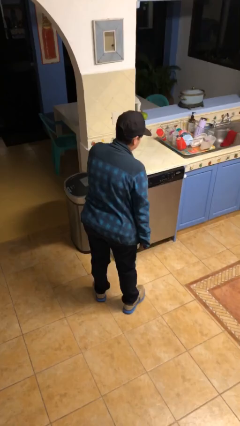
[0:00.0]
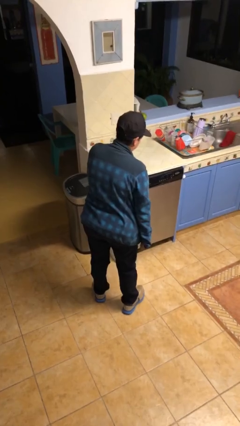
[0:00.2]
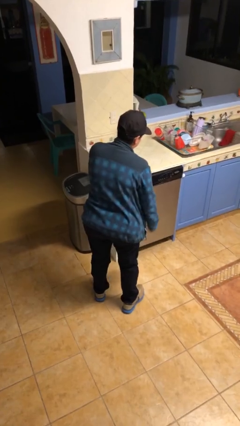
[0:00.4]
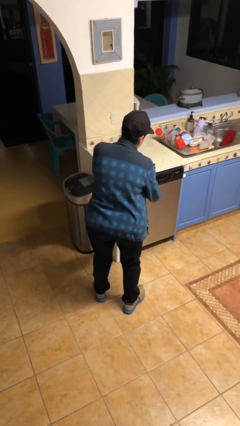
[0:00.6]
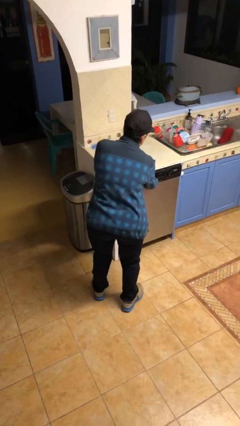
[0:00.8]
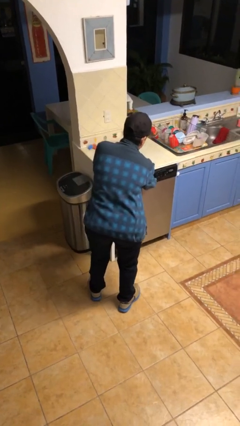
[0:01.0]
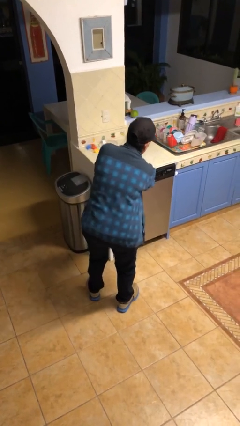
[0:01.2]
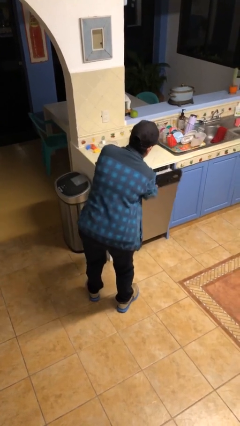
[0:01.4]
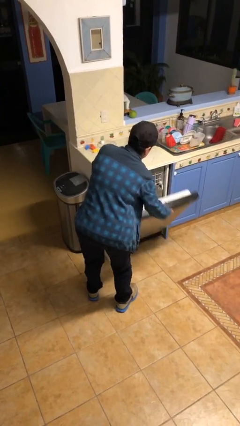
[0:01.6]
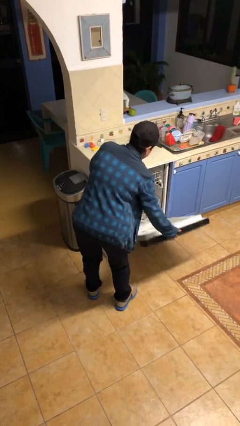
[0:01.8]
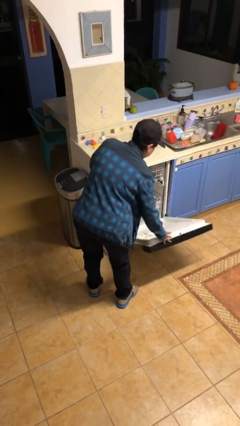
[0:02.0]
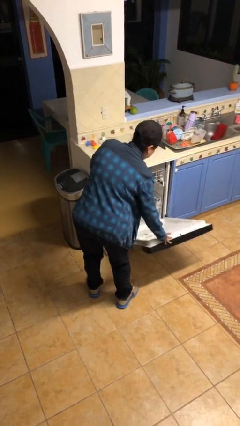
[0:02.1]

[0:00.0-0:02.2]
person opens dishwasher

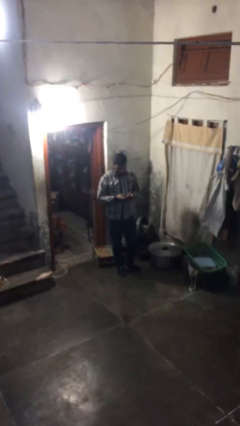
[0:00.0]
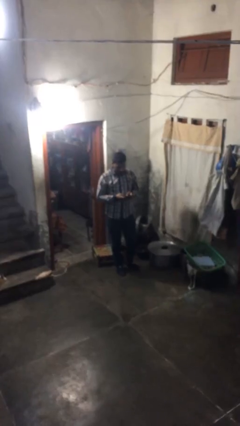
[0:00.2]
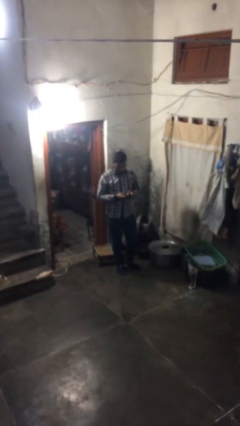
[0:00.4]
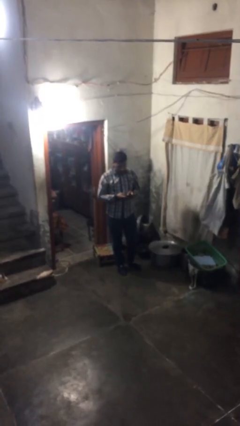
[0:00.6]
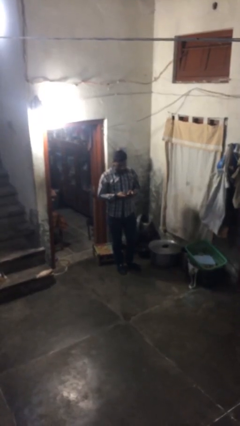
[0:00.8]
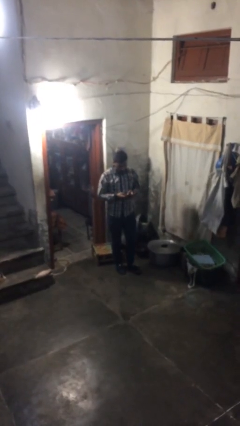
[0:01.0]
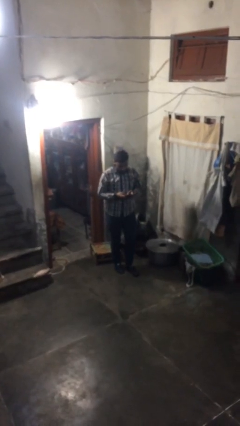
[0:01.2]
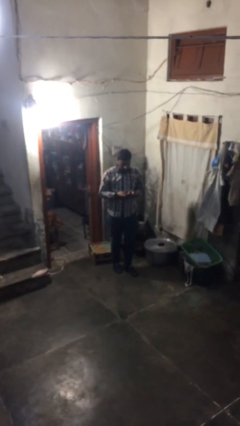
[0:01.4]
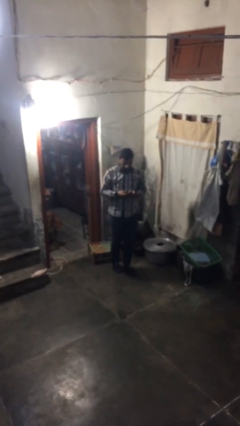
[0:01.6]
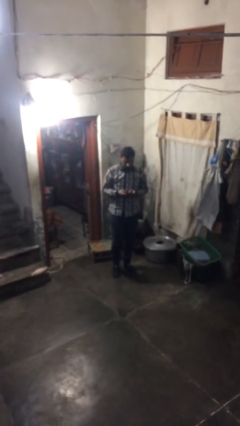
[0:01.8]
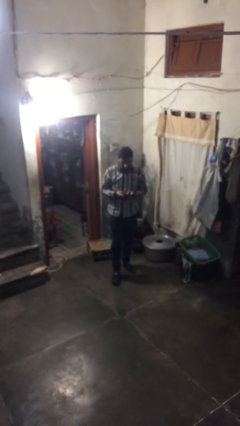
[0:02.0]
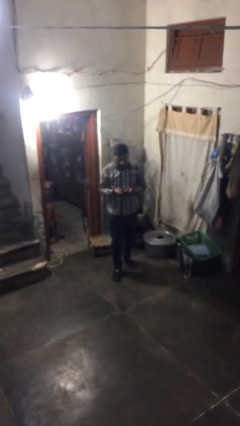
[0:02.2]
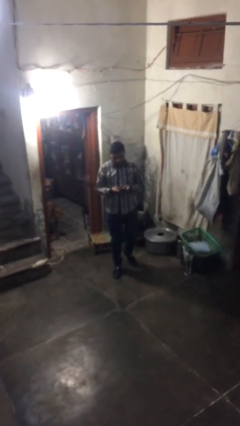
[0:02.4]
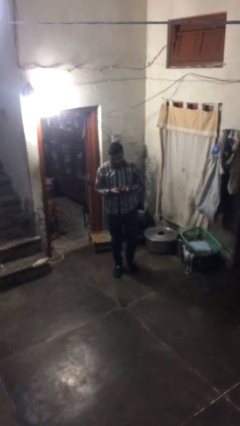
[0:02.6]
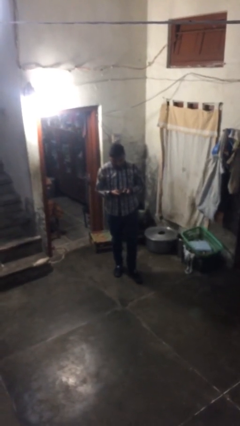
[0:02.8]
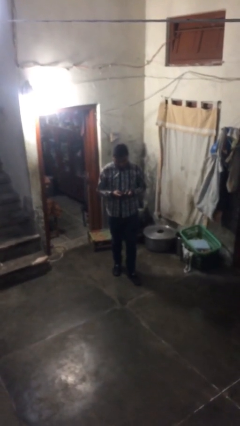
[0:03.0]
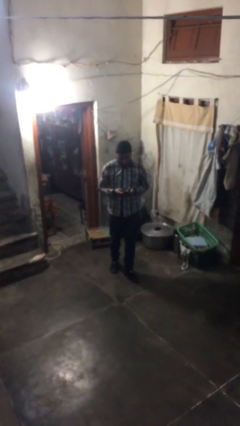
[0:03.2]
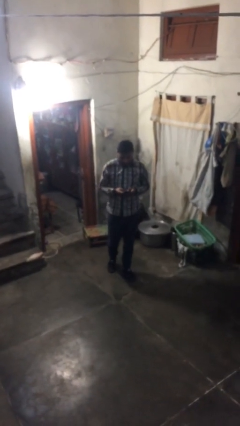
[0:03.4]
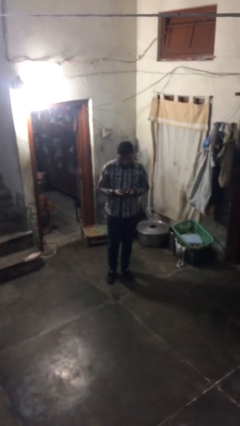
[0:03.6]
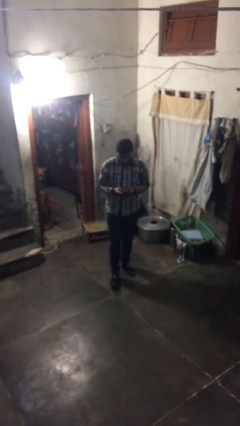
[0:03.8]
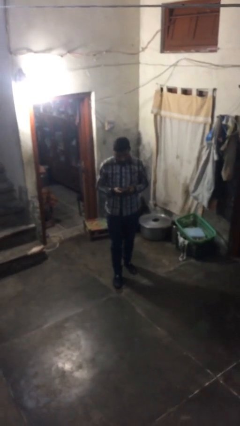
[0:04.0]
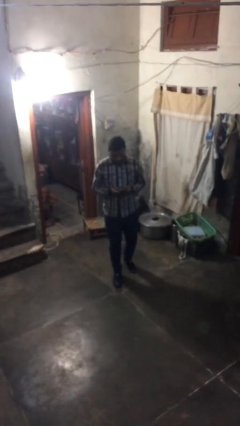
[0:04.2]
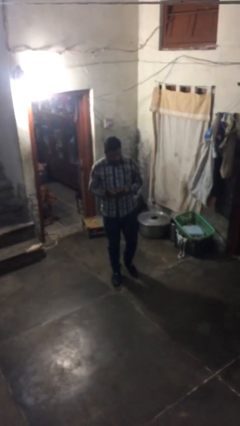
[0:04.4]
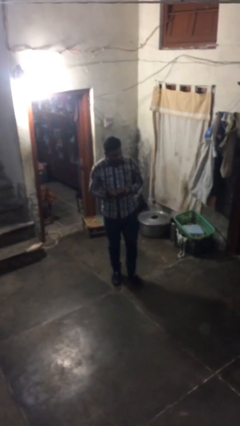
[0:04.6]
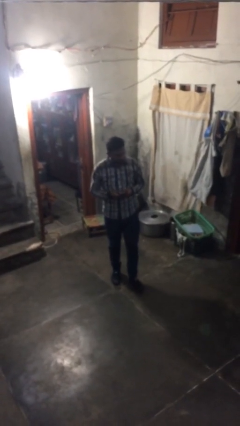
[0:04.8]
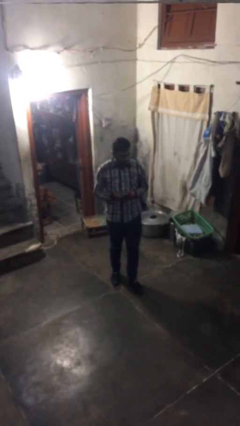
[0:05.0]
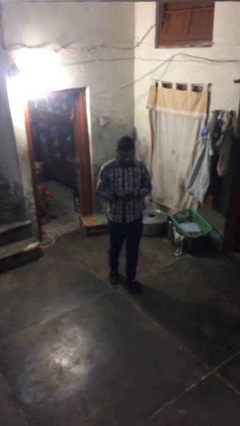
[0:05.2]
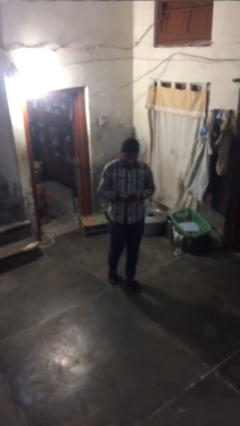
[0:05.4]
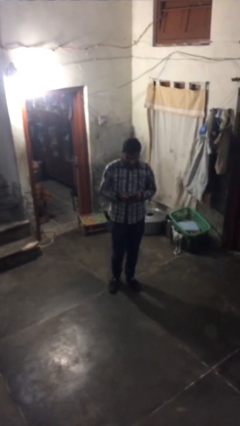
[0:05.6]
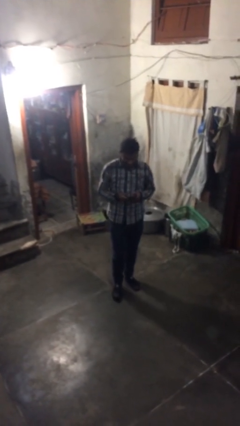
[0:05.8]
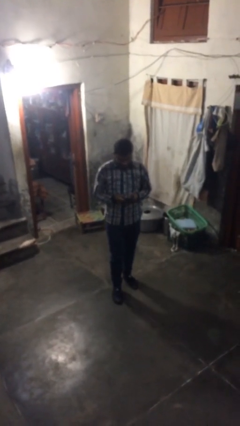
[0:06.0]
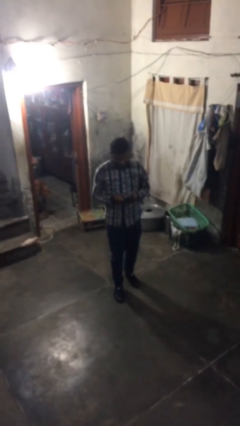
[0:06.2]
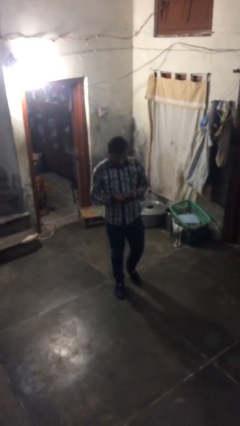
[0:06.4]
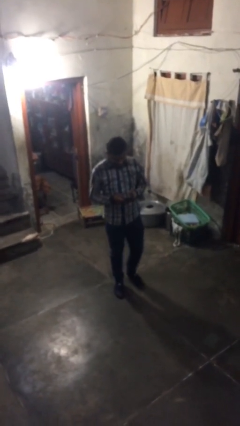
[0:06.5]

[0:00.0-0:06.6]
person texts on phone

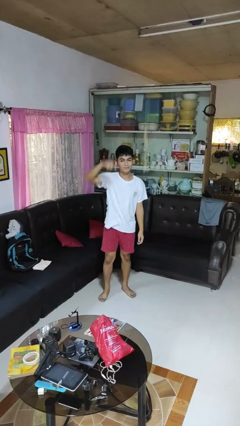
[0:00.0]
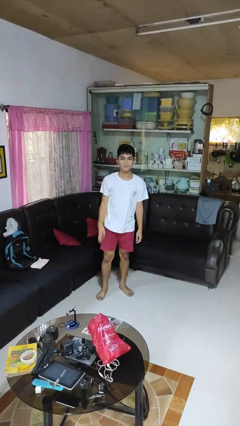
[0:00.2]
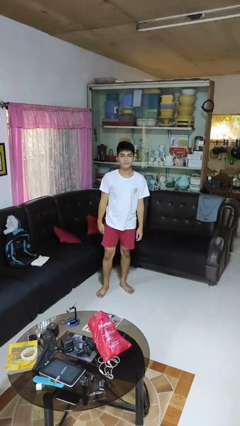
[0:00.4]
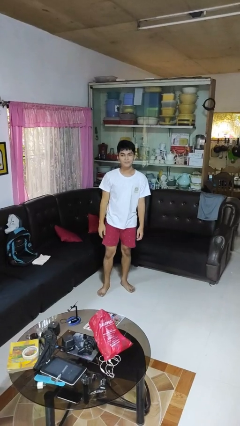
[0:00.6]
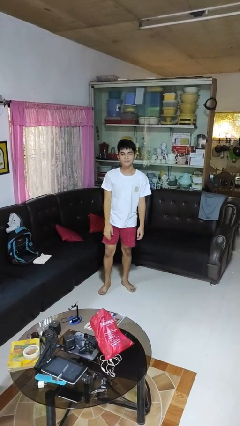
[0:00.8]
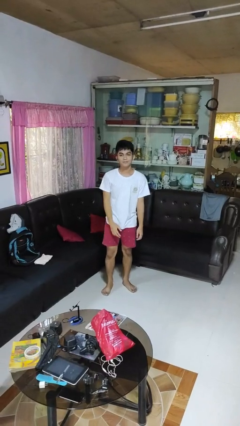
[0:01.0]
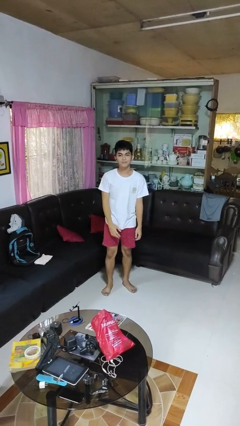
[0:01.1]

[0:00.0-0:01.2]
person gestures lower hand

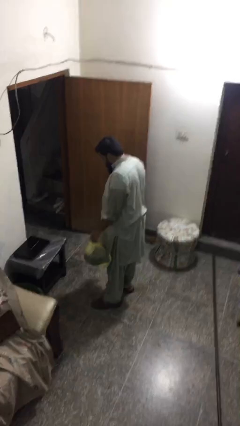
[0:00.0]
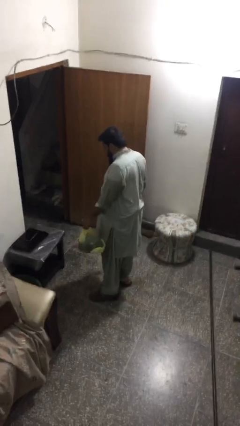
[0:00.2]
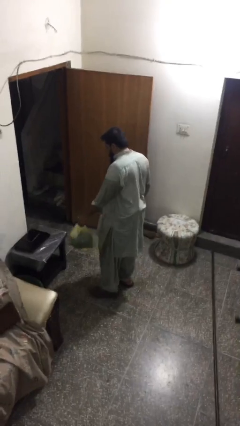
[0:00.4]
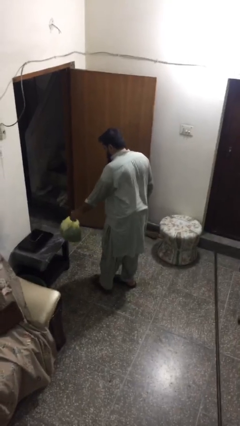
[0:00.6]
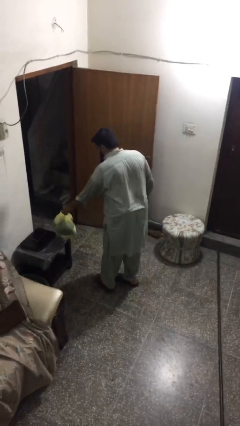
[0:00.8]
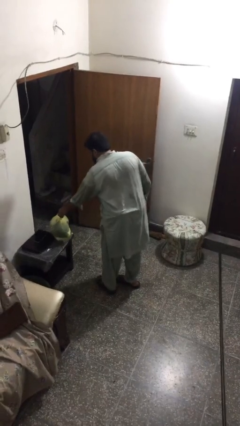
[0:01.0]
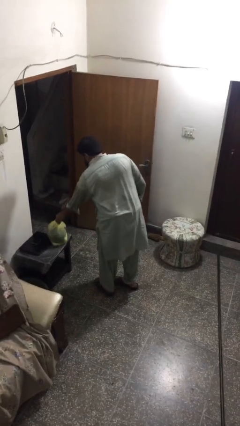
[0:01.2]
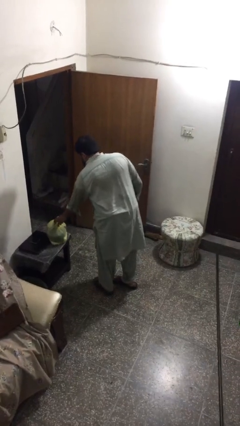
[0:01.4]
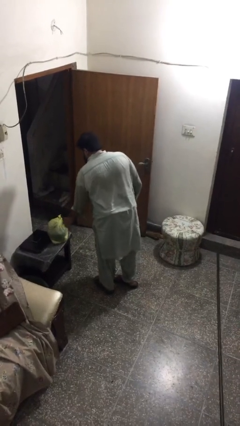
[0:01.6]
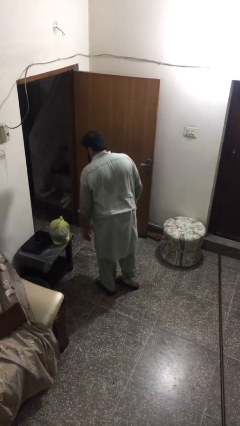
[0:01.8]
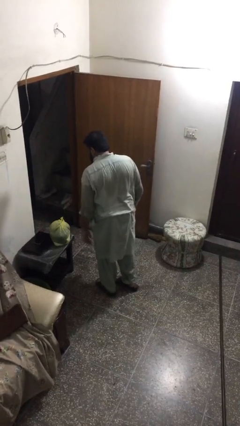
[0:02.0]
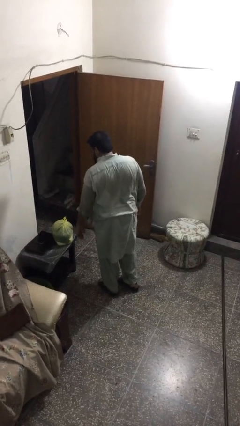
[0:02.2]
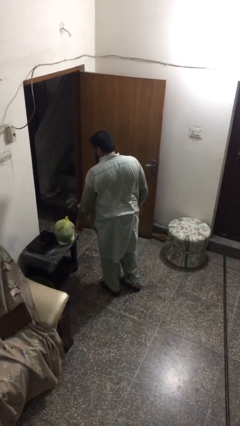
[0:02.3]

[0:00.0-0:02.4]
person puts down object on table

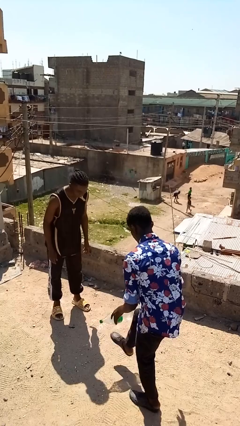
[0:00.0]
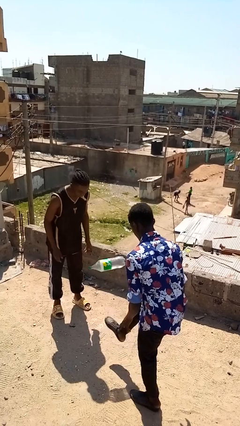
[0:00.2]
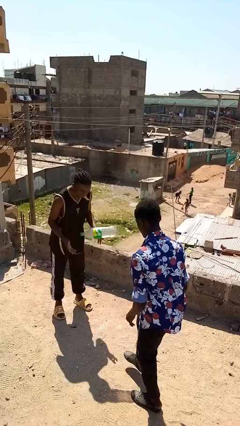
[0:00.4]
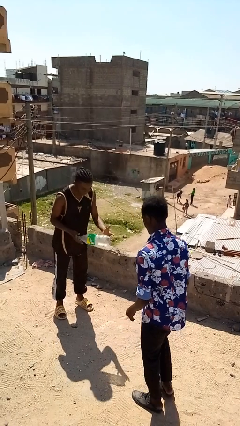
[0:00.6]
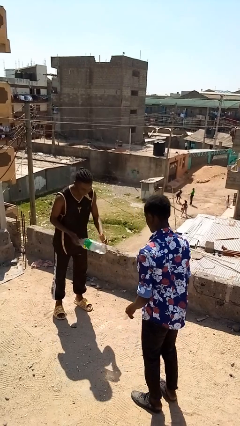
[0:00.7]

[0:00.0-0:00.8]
person kicks object to person

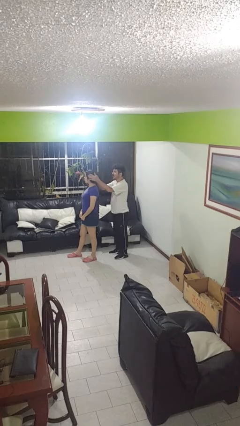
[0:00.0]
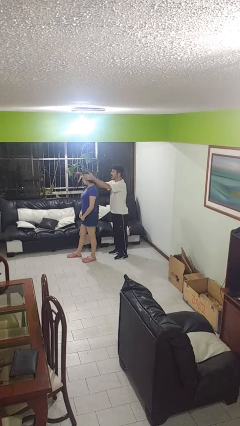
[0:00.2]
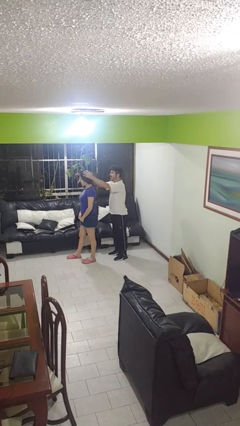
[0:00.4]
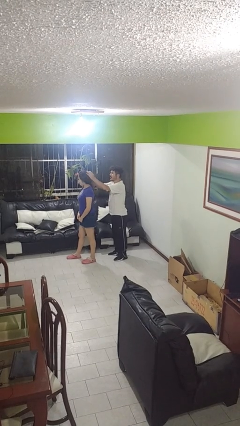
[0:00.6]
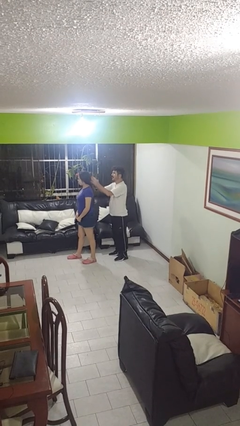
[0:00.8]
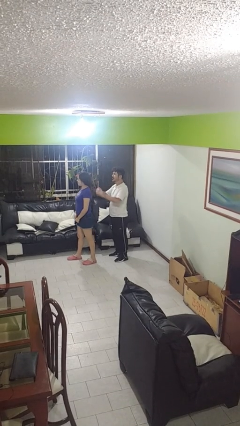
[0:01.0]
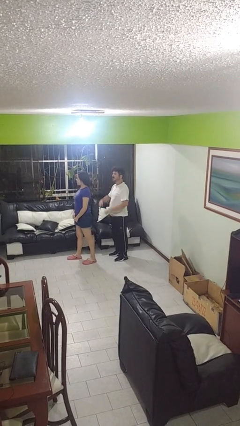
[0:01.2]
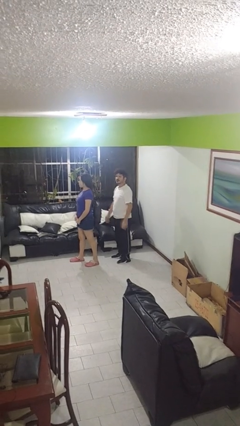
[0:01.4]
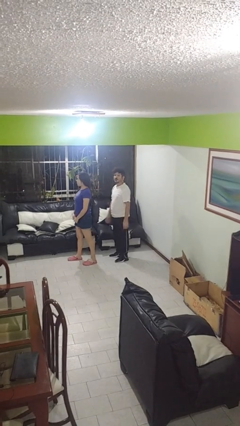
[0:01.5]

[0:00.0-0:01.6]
person grabs person by hair

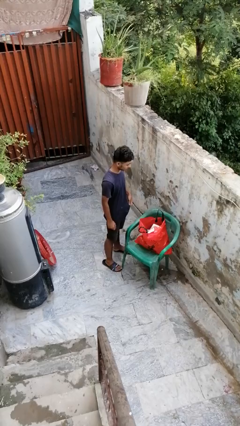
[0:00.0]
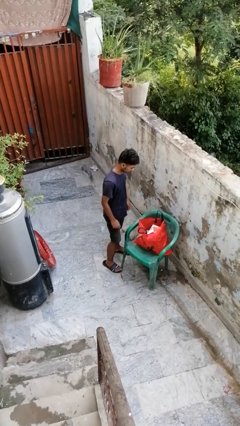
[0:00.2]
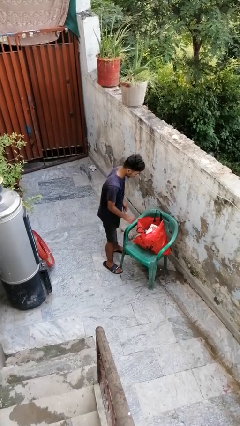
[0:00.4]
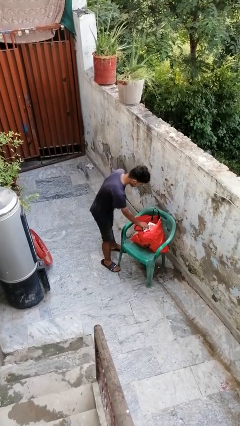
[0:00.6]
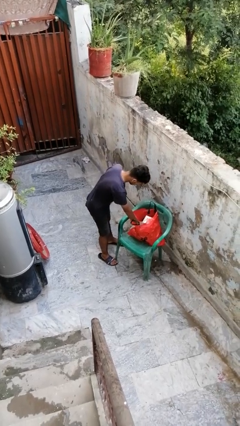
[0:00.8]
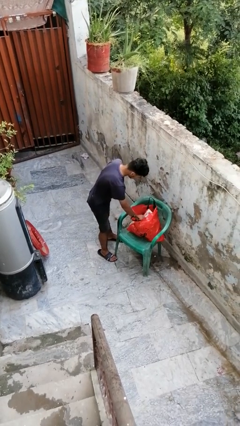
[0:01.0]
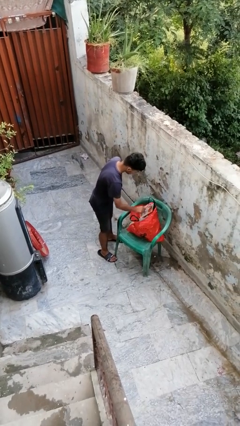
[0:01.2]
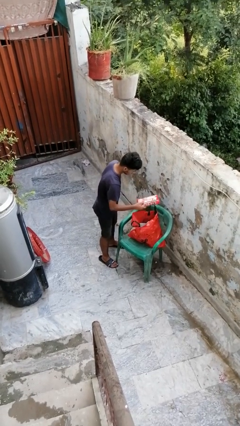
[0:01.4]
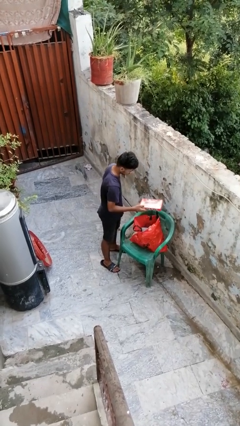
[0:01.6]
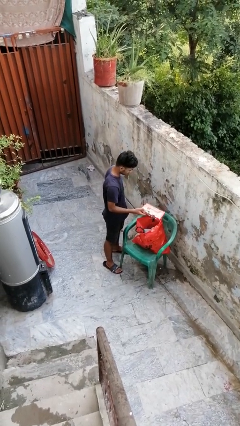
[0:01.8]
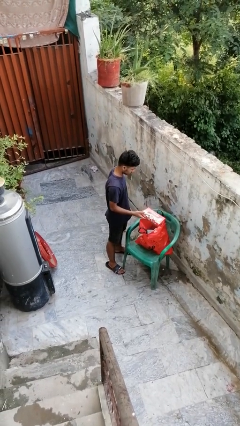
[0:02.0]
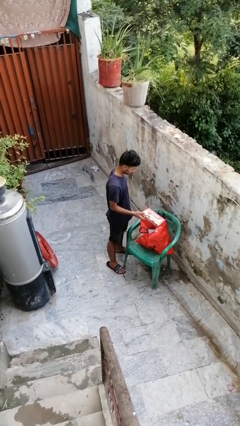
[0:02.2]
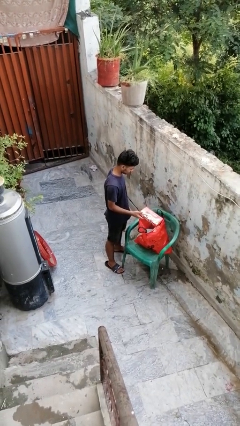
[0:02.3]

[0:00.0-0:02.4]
person takes object from bag
